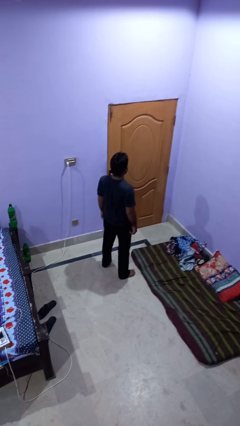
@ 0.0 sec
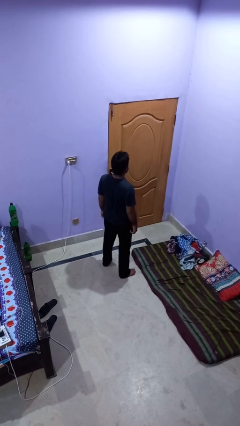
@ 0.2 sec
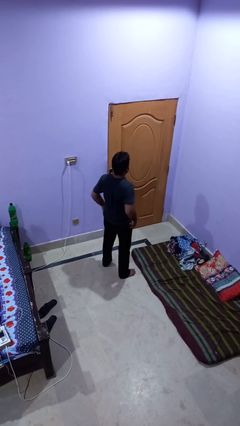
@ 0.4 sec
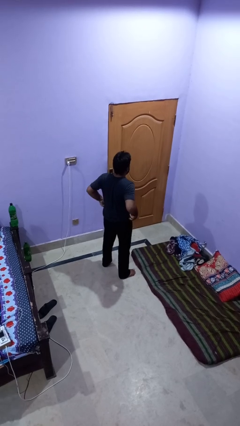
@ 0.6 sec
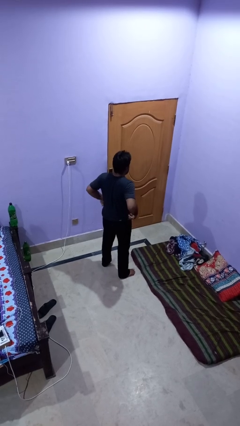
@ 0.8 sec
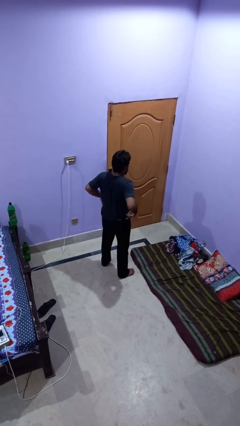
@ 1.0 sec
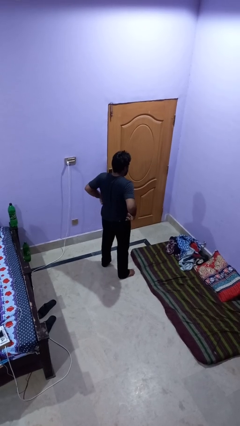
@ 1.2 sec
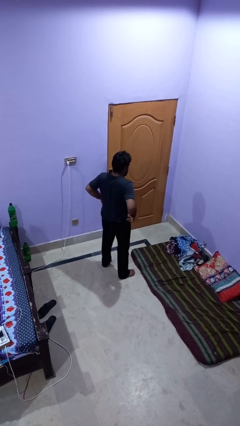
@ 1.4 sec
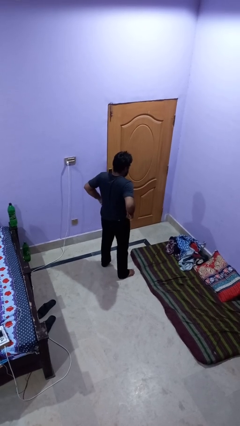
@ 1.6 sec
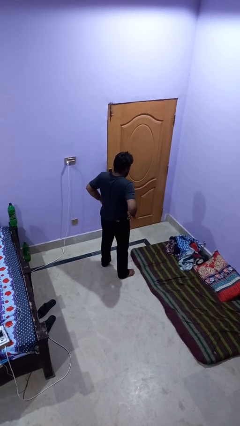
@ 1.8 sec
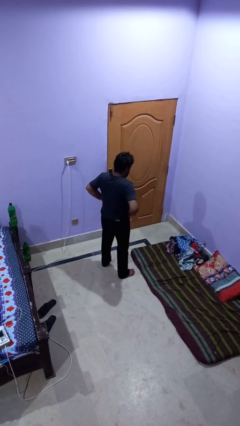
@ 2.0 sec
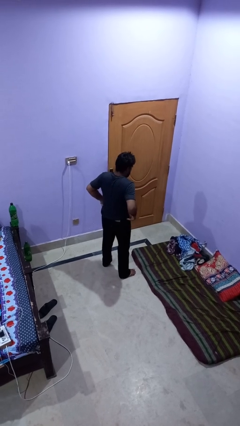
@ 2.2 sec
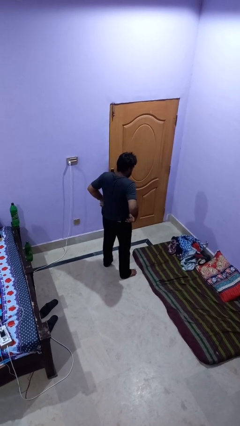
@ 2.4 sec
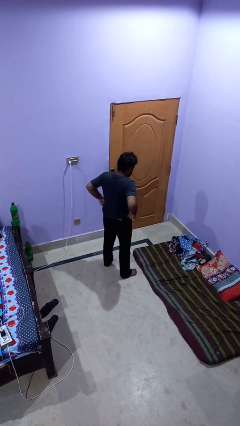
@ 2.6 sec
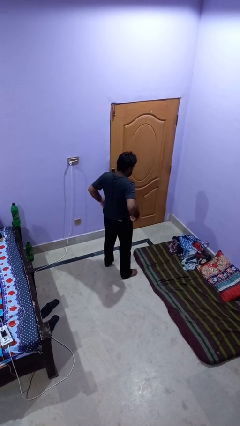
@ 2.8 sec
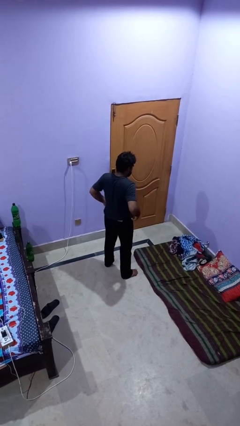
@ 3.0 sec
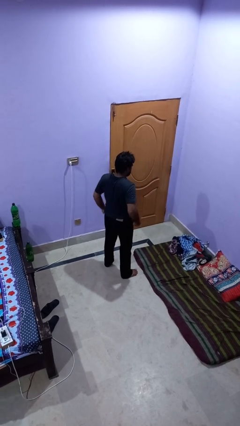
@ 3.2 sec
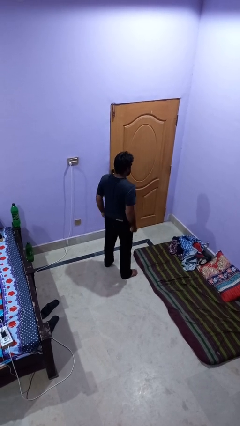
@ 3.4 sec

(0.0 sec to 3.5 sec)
person hikes up pants

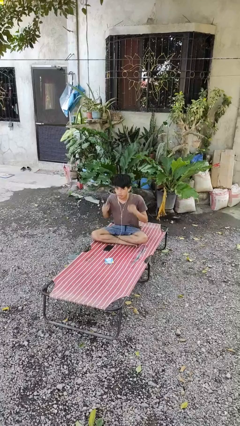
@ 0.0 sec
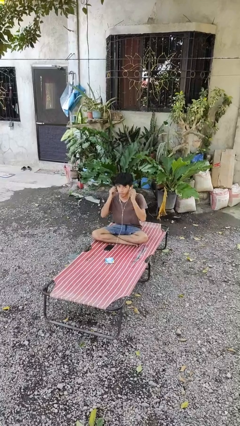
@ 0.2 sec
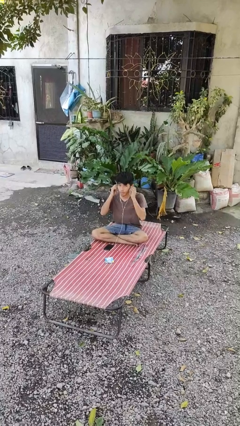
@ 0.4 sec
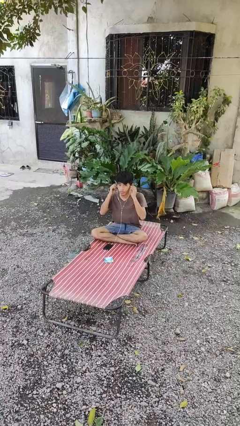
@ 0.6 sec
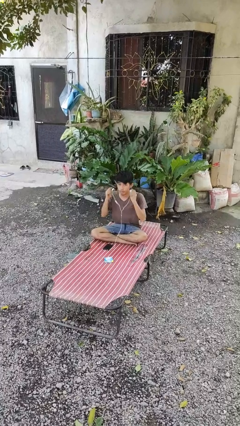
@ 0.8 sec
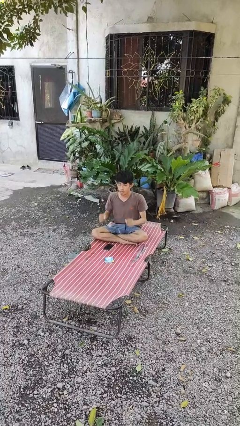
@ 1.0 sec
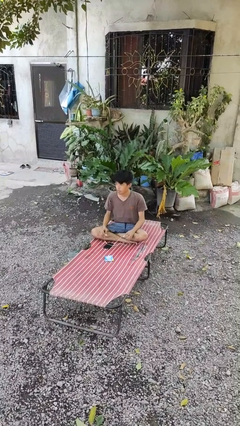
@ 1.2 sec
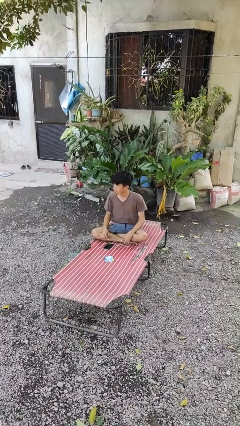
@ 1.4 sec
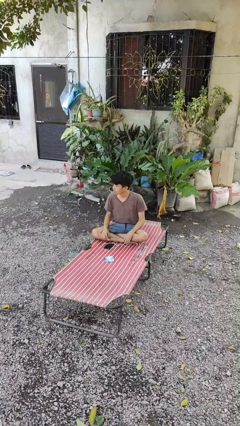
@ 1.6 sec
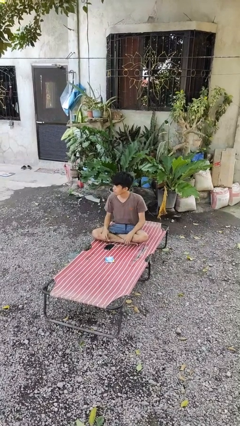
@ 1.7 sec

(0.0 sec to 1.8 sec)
person takes off headphones

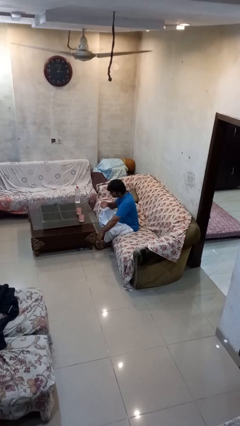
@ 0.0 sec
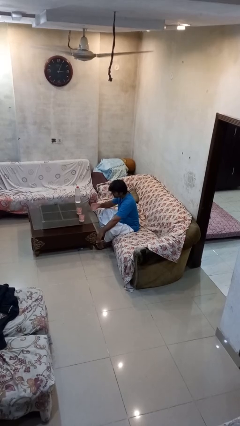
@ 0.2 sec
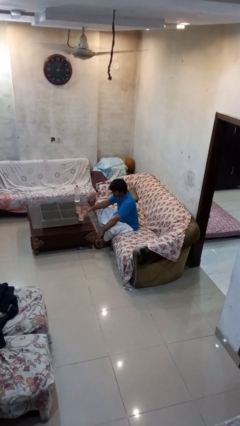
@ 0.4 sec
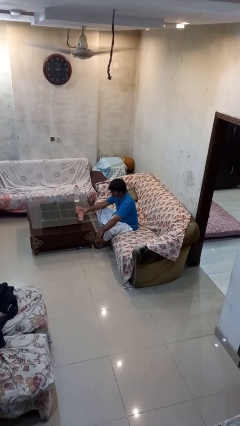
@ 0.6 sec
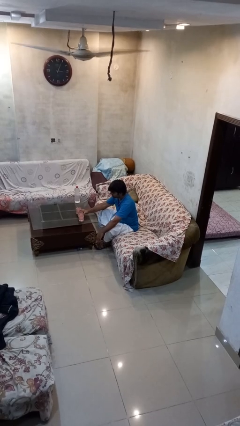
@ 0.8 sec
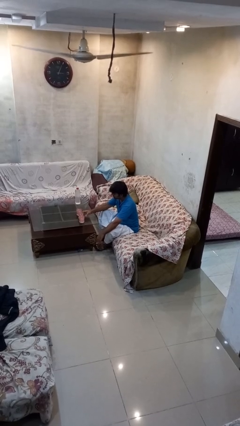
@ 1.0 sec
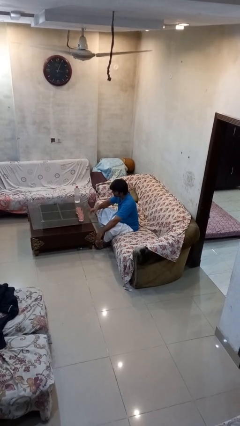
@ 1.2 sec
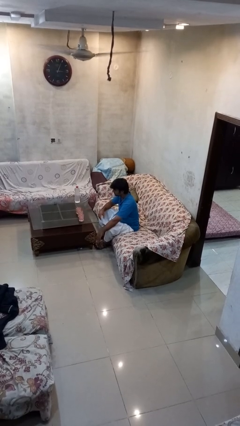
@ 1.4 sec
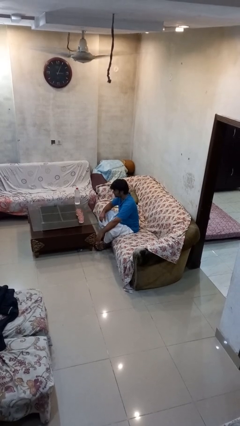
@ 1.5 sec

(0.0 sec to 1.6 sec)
person puts down object on table

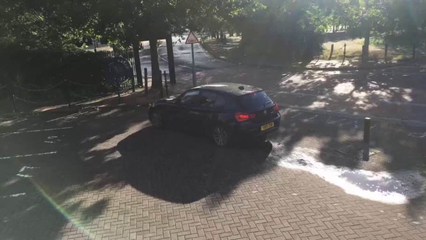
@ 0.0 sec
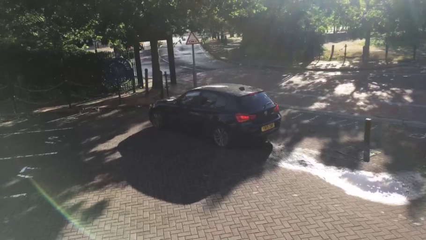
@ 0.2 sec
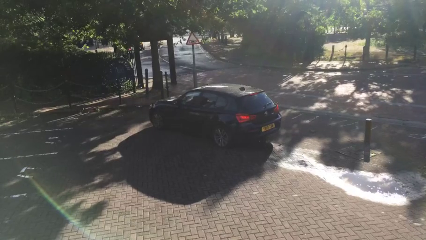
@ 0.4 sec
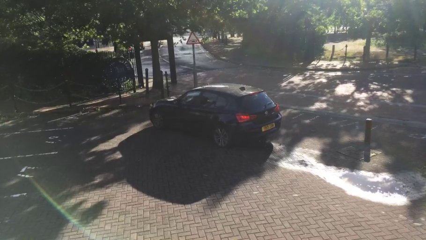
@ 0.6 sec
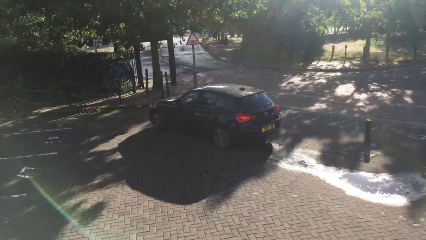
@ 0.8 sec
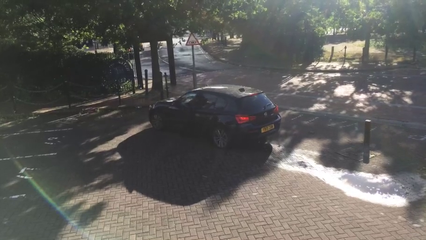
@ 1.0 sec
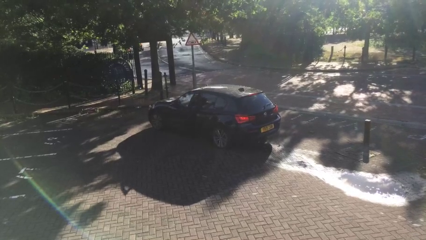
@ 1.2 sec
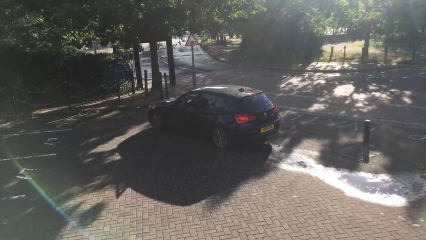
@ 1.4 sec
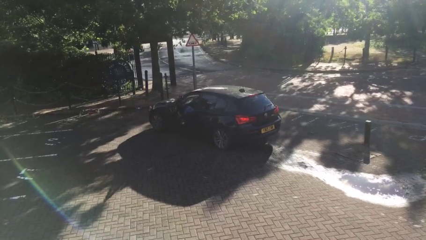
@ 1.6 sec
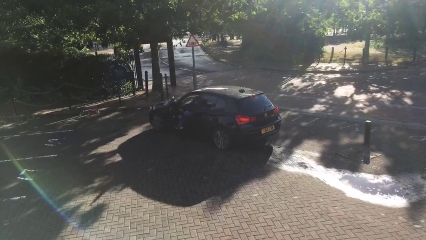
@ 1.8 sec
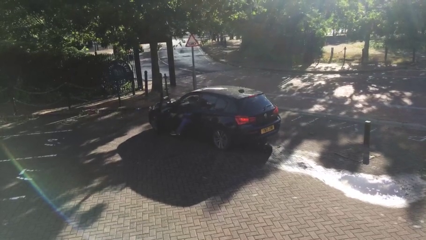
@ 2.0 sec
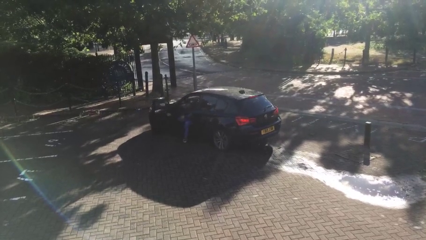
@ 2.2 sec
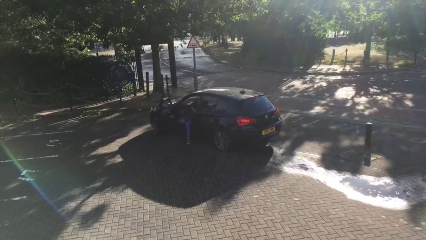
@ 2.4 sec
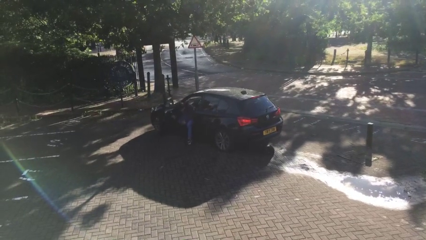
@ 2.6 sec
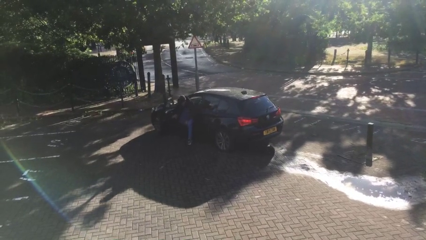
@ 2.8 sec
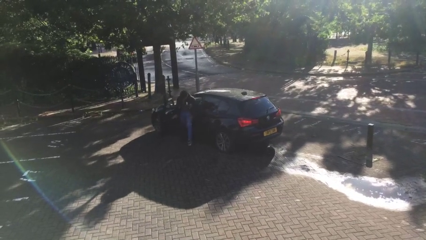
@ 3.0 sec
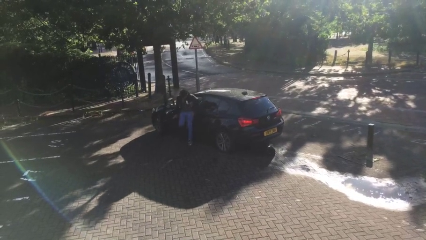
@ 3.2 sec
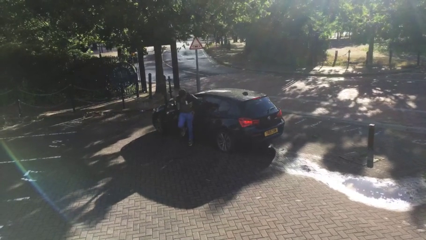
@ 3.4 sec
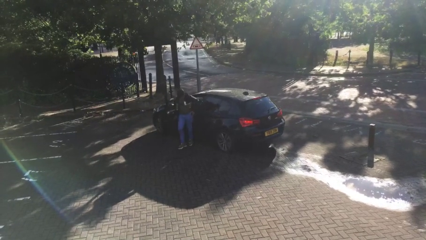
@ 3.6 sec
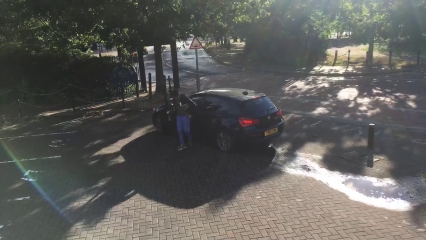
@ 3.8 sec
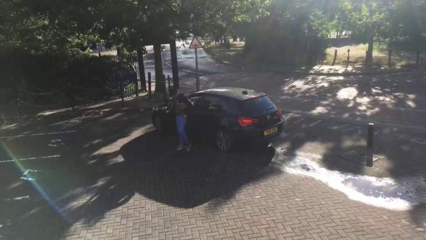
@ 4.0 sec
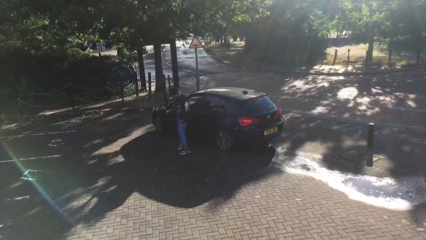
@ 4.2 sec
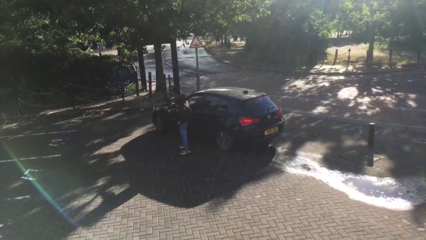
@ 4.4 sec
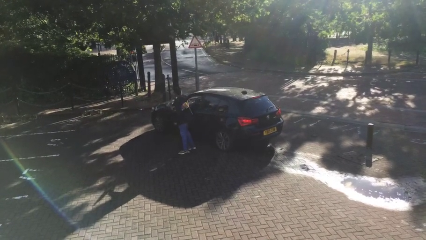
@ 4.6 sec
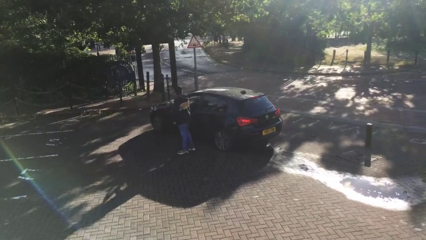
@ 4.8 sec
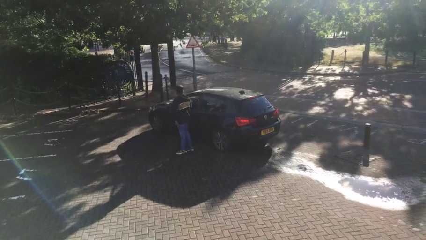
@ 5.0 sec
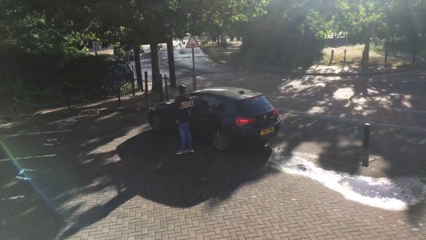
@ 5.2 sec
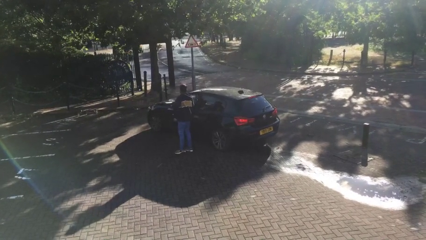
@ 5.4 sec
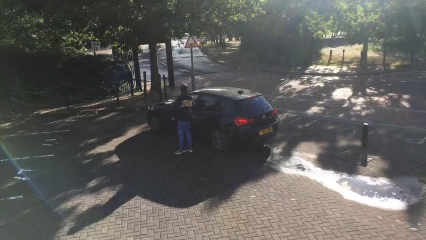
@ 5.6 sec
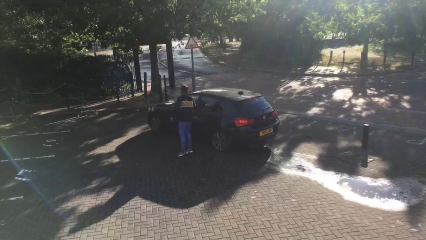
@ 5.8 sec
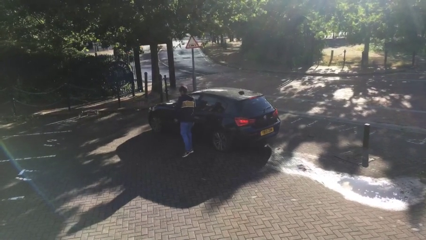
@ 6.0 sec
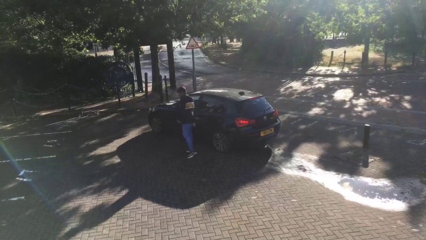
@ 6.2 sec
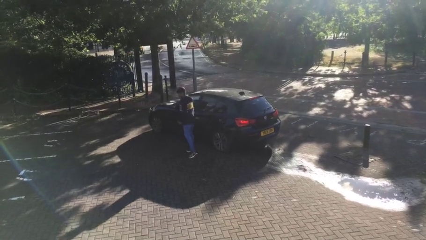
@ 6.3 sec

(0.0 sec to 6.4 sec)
car drops off person

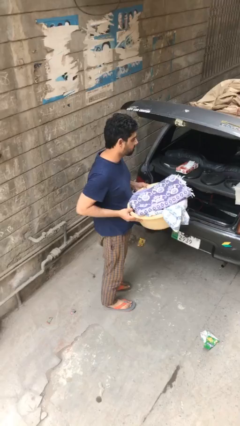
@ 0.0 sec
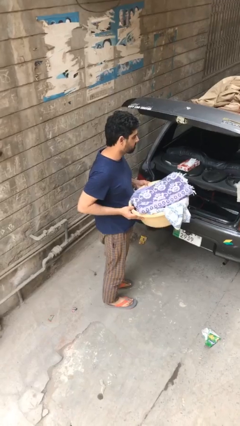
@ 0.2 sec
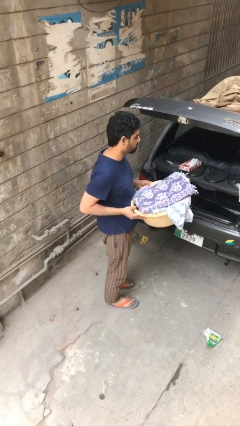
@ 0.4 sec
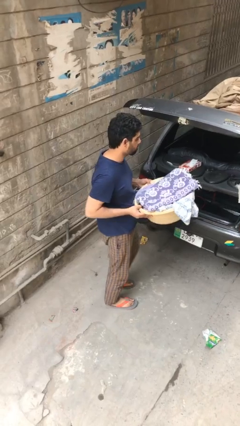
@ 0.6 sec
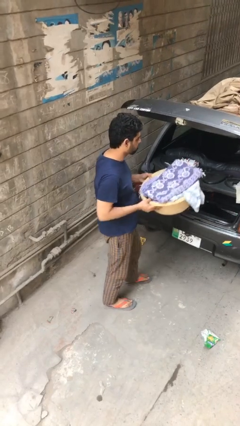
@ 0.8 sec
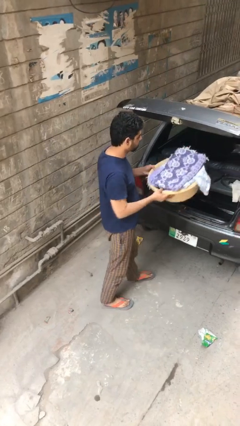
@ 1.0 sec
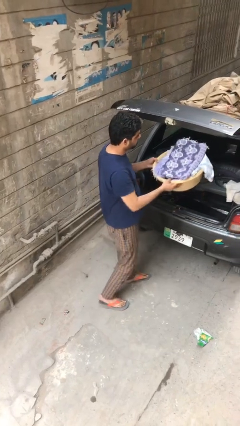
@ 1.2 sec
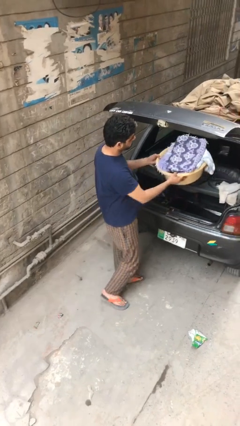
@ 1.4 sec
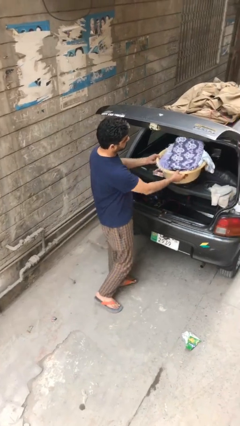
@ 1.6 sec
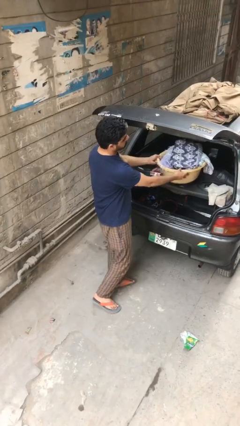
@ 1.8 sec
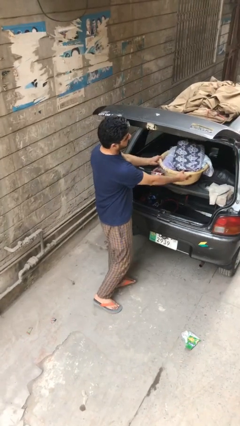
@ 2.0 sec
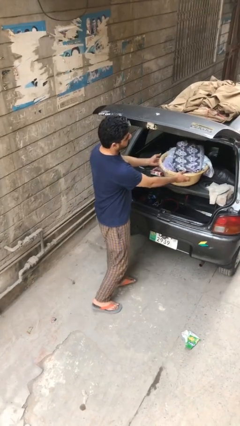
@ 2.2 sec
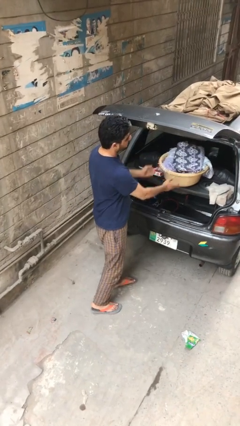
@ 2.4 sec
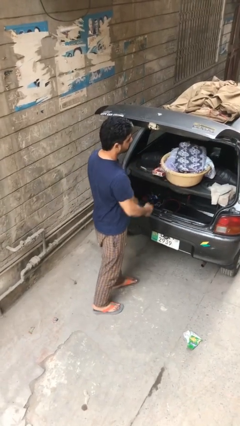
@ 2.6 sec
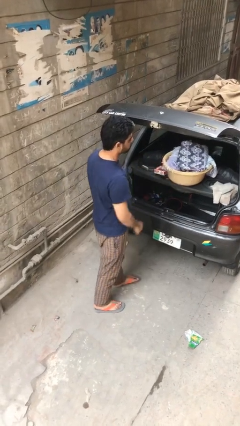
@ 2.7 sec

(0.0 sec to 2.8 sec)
person loads car

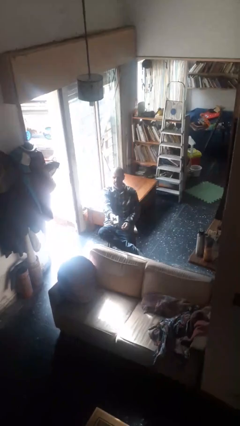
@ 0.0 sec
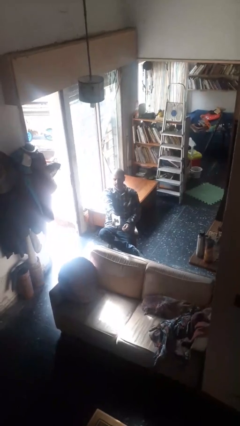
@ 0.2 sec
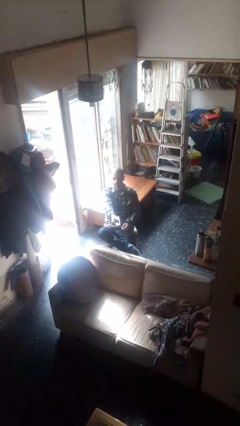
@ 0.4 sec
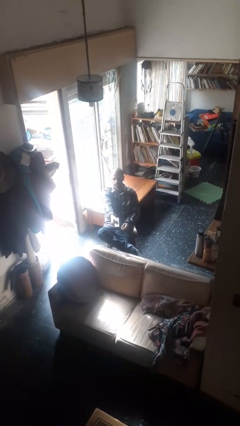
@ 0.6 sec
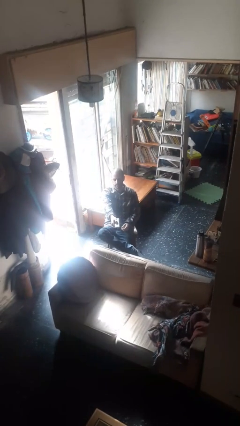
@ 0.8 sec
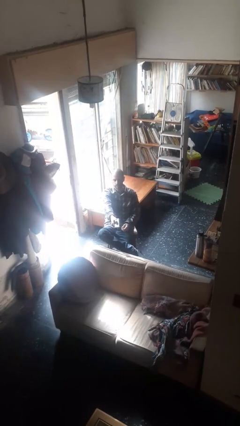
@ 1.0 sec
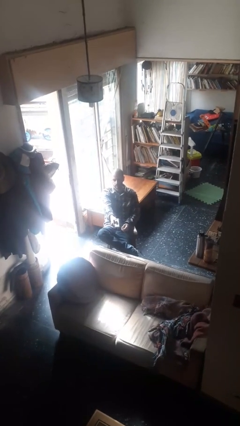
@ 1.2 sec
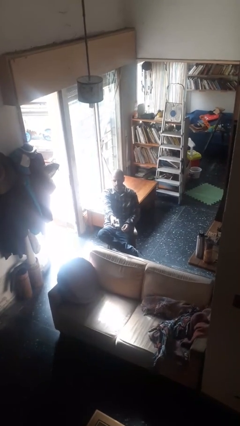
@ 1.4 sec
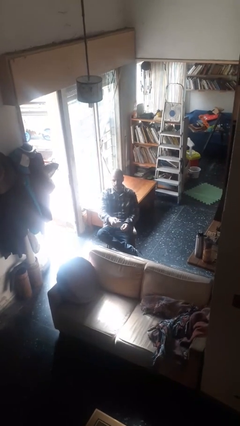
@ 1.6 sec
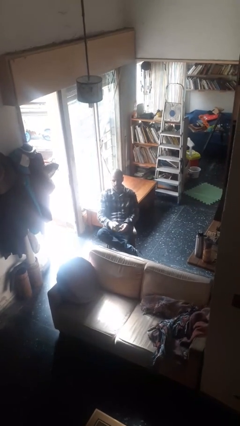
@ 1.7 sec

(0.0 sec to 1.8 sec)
person uses television remote
